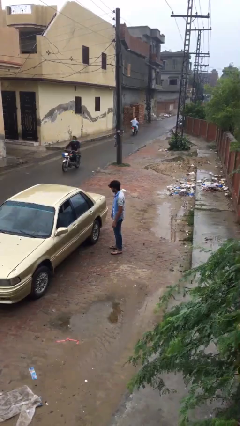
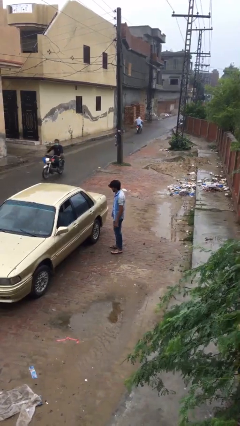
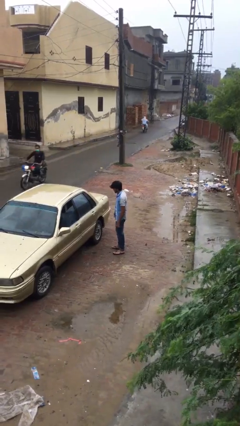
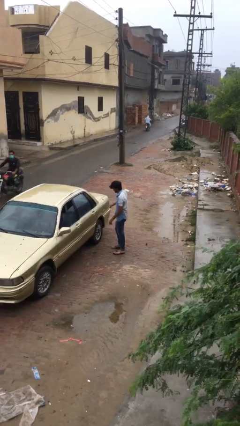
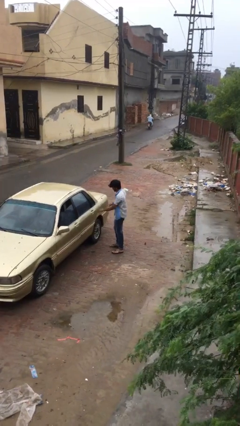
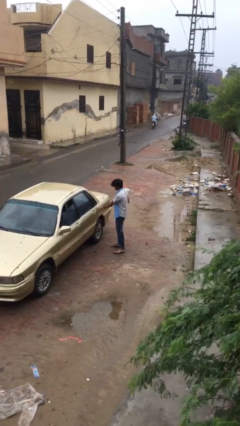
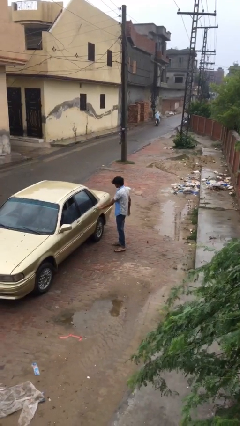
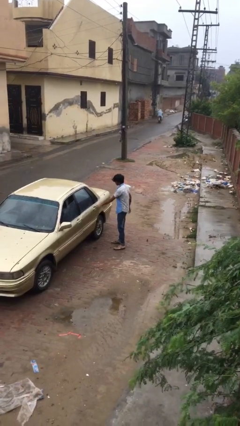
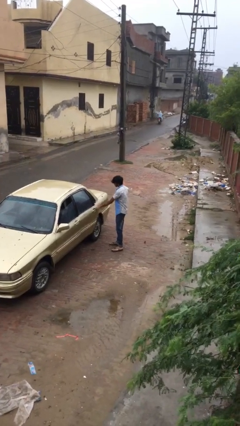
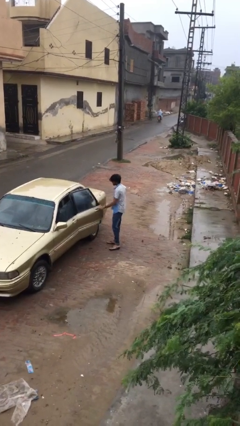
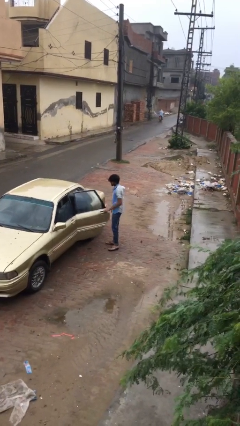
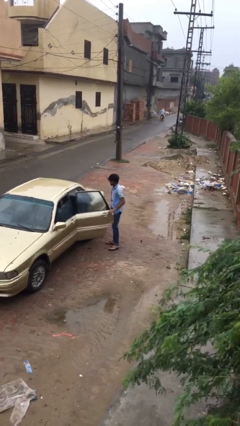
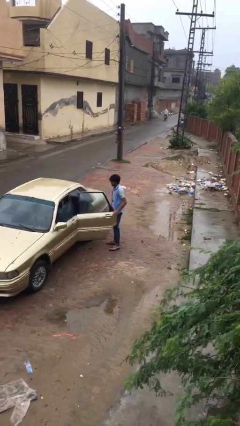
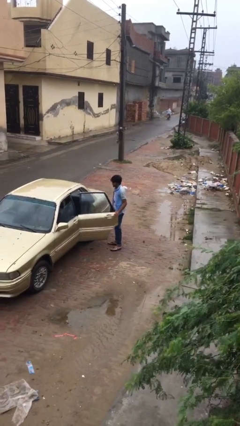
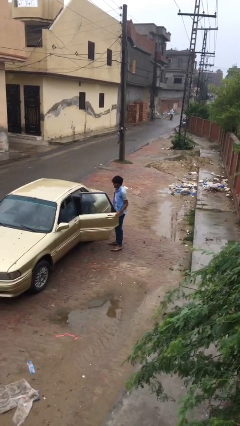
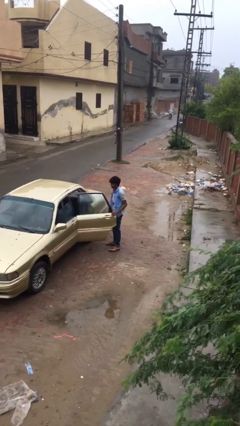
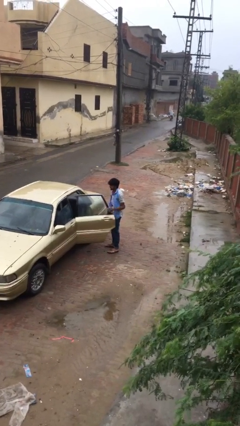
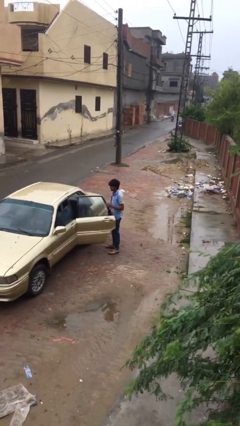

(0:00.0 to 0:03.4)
person opens car door

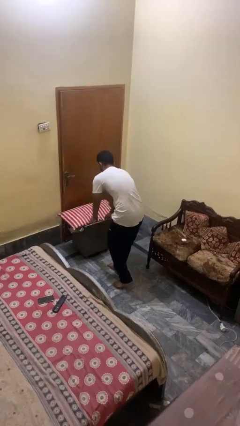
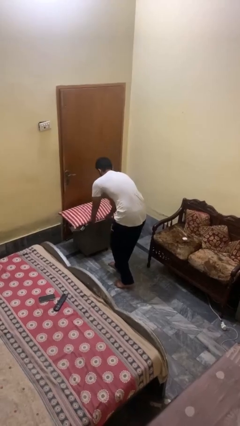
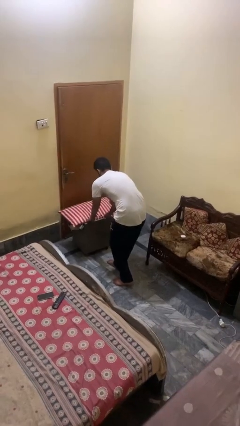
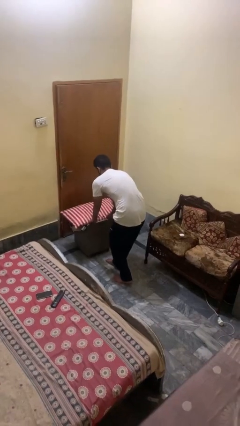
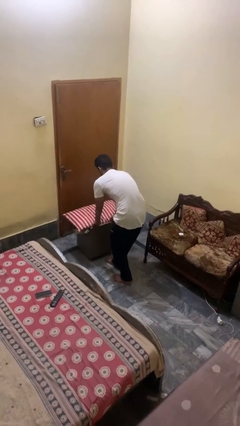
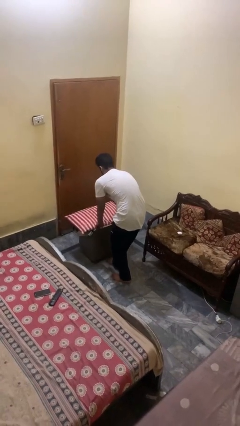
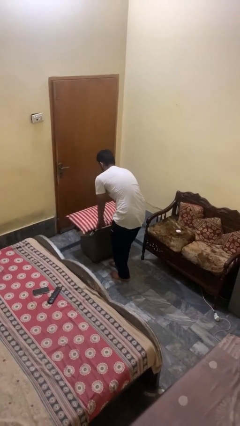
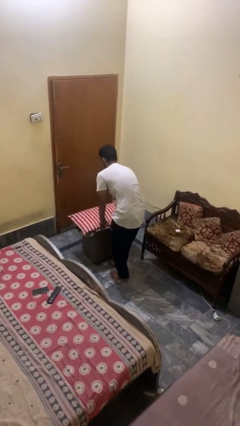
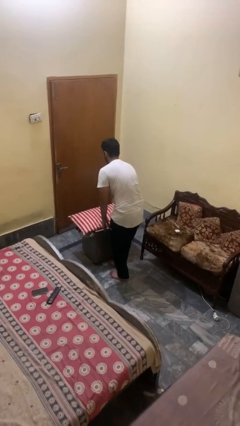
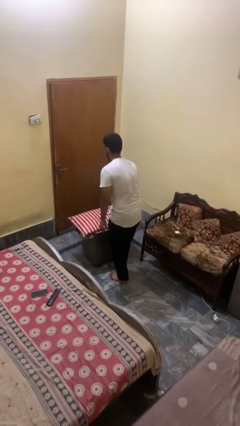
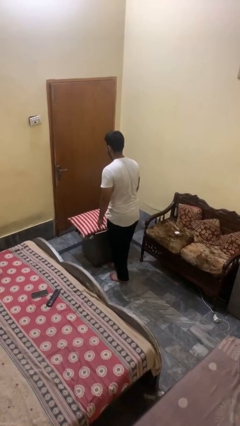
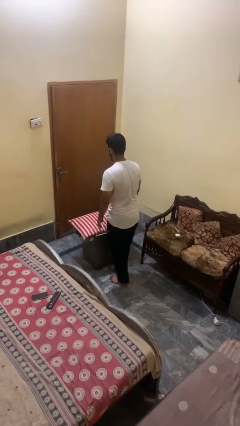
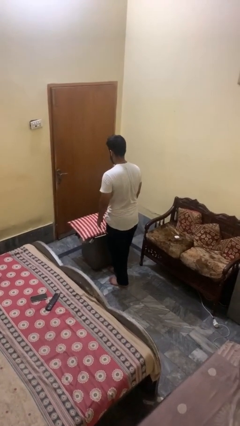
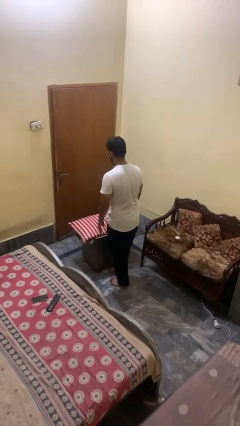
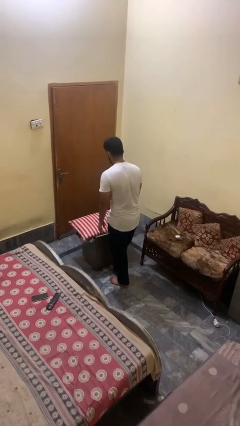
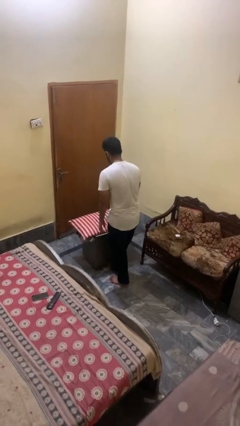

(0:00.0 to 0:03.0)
person pulls wheeled cart

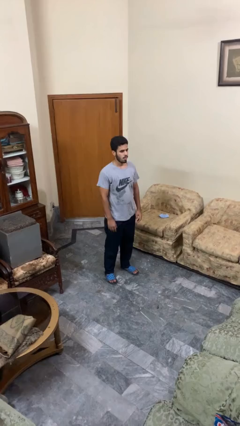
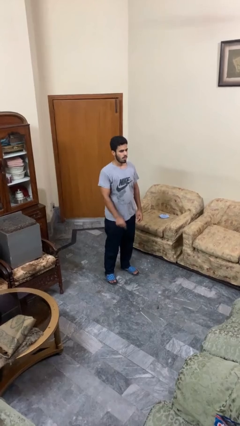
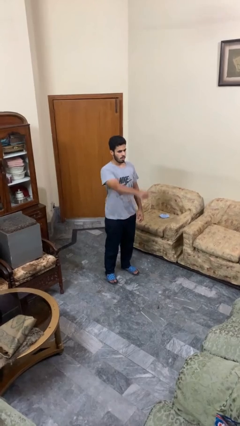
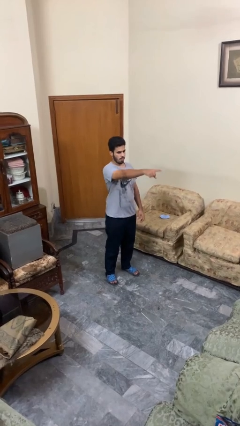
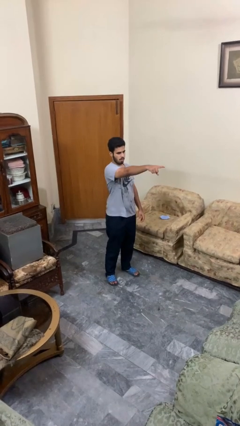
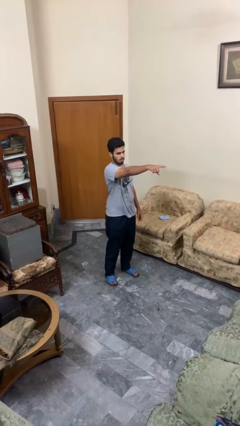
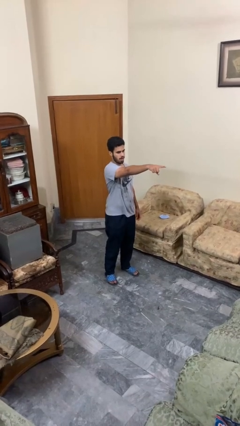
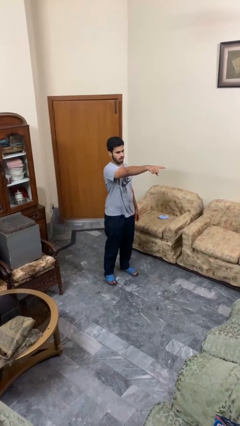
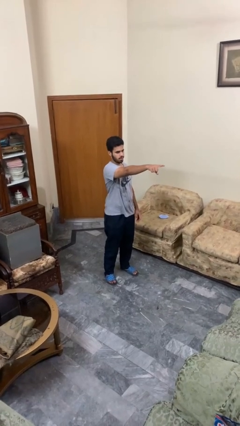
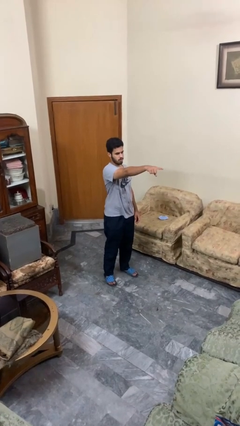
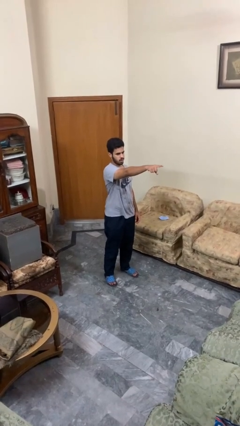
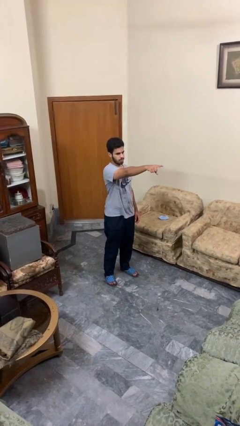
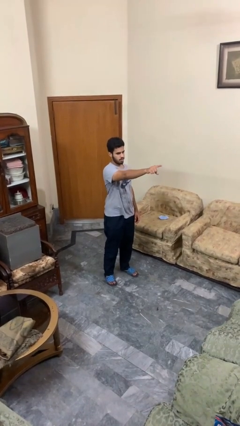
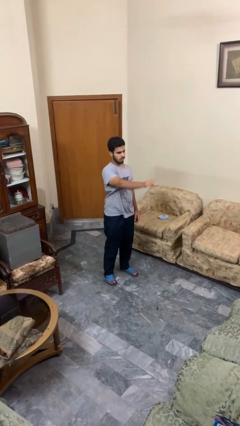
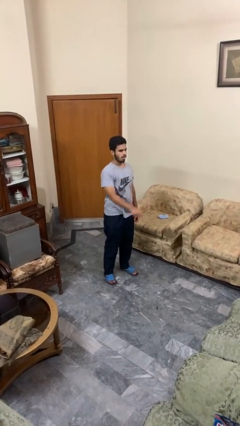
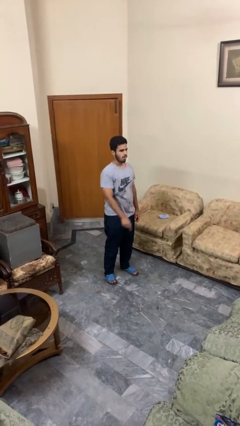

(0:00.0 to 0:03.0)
person points at person

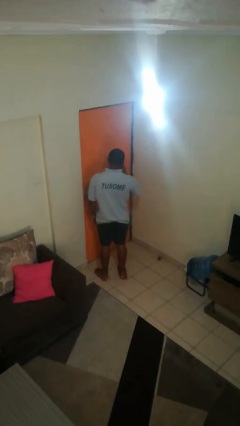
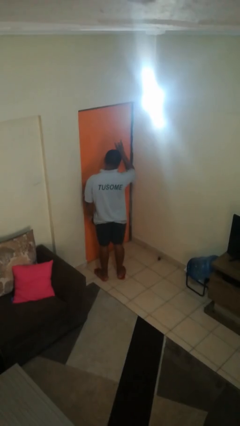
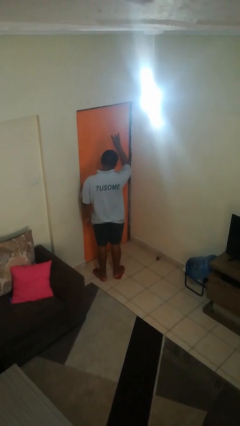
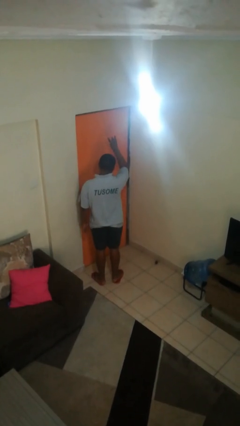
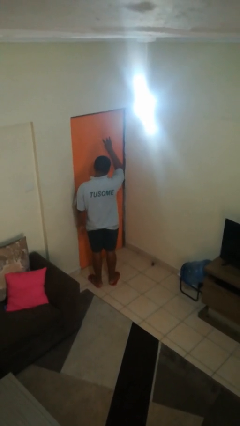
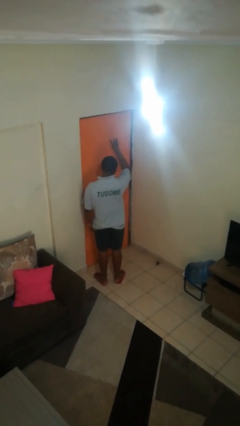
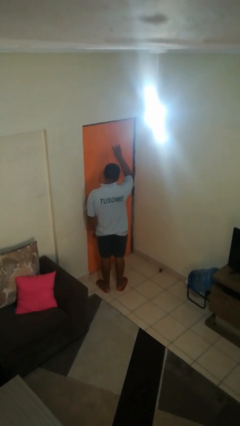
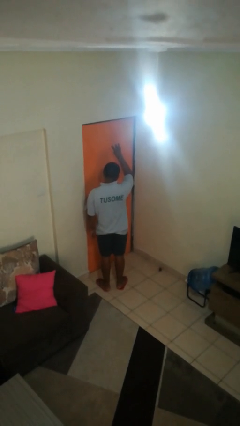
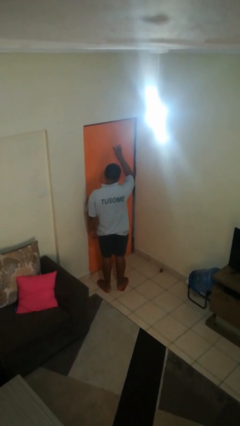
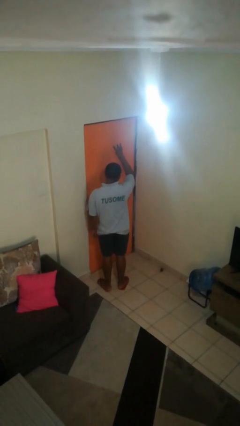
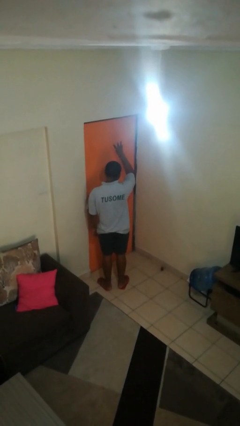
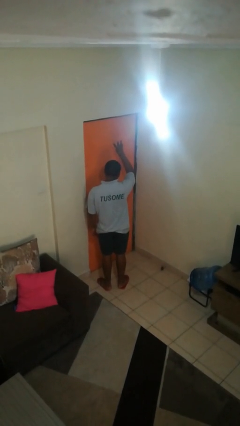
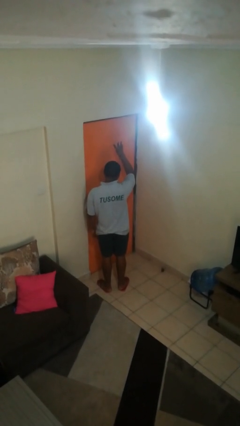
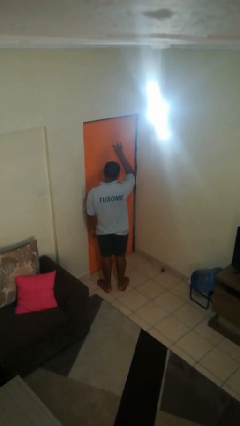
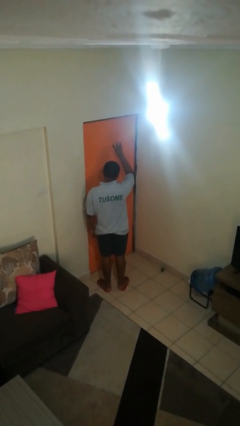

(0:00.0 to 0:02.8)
person gestures number three

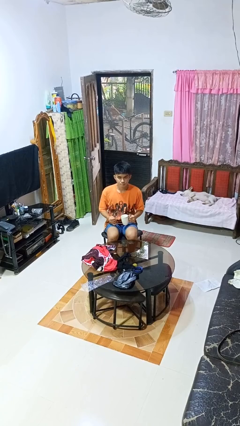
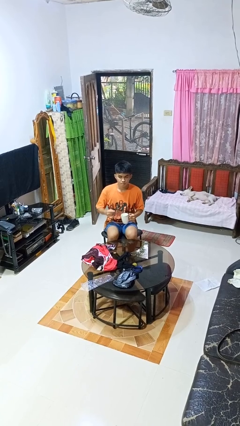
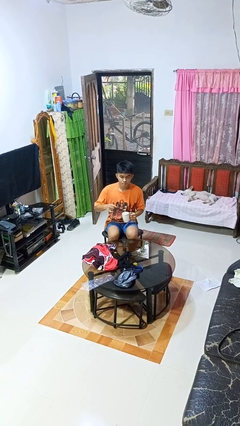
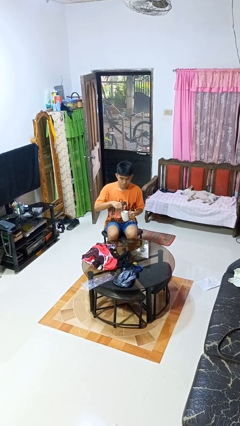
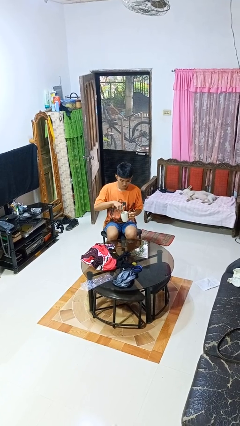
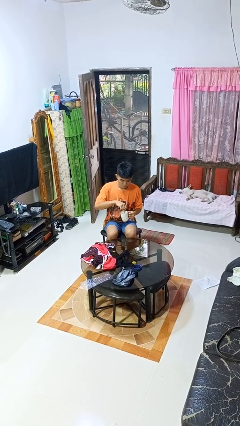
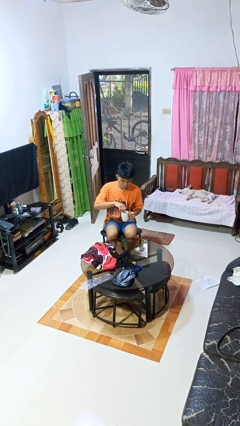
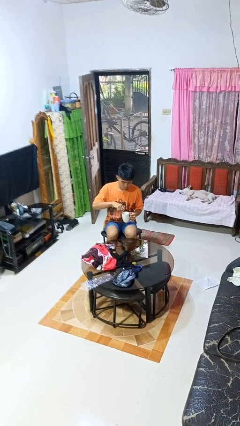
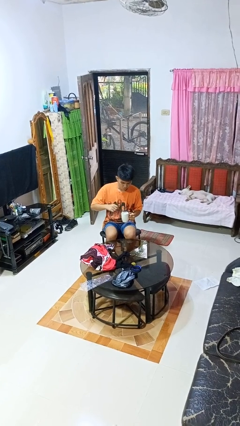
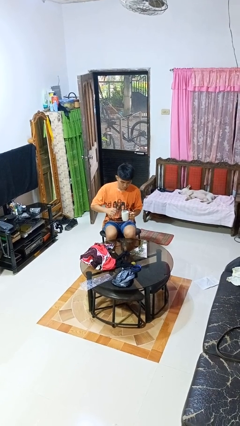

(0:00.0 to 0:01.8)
person stirs mug

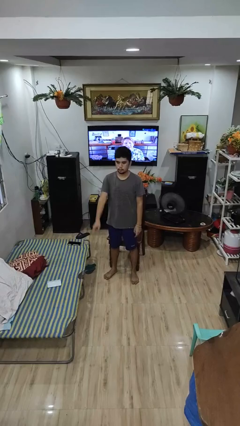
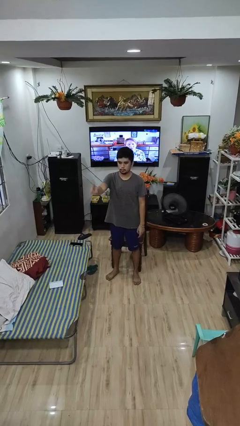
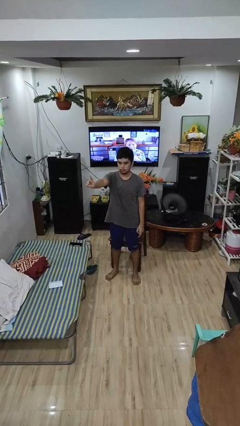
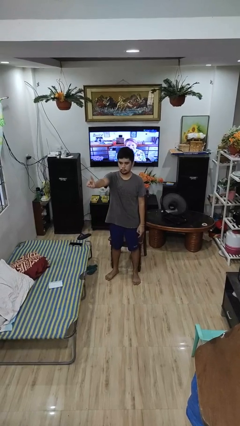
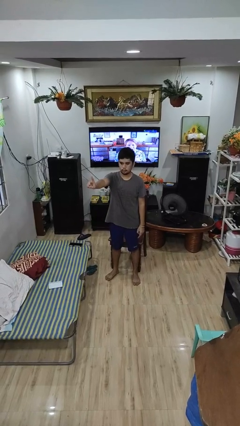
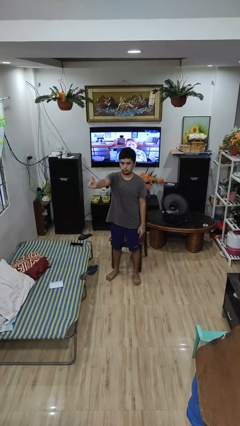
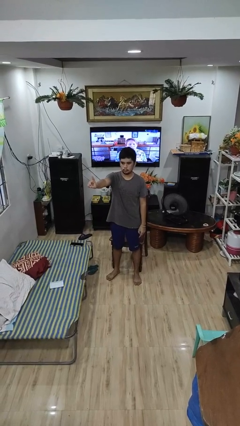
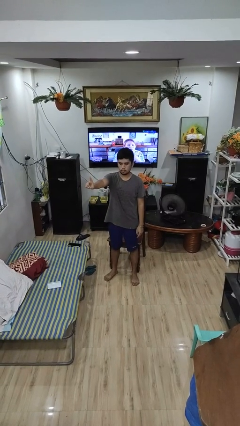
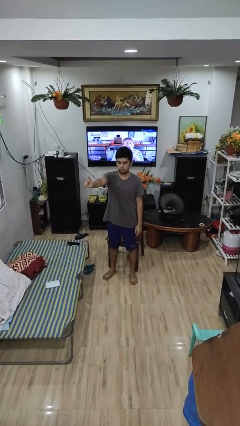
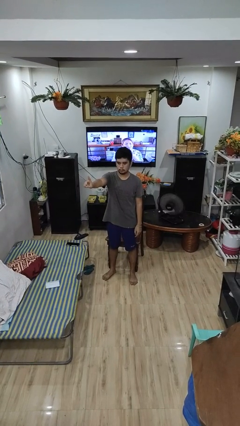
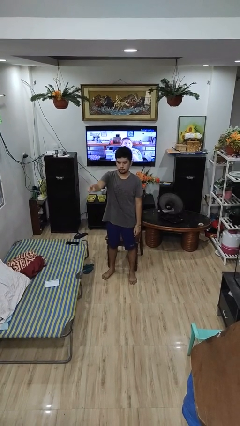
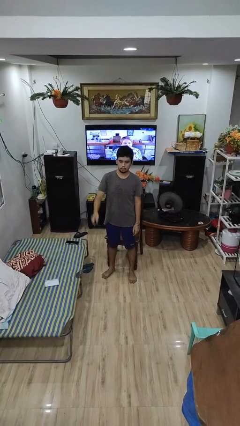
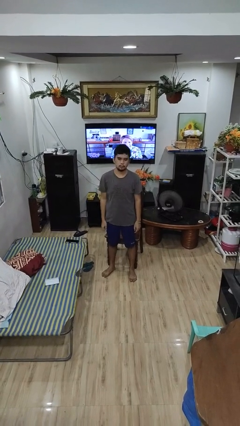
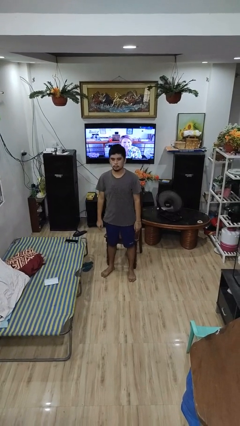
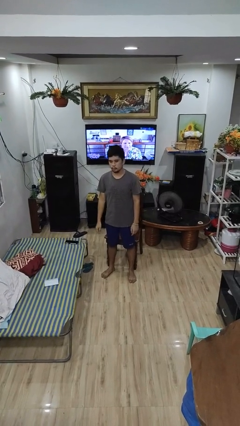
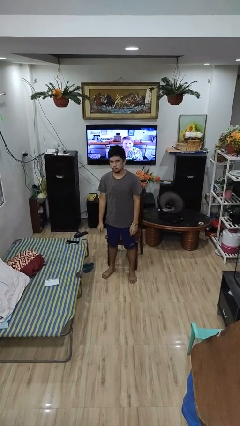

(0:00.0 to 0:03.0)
person gestures number one

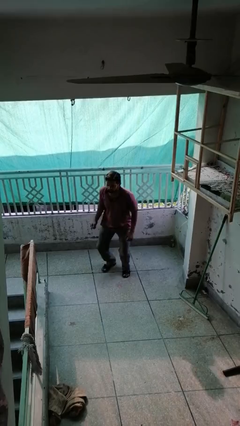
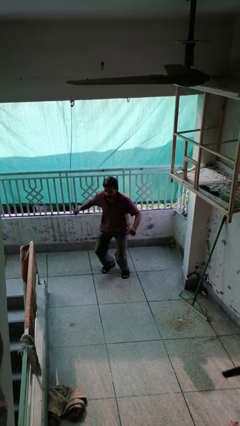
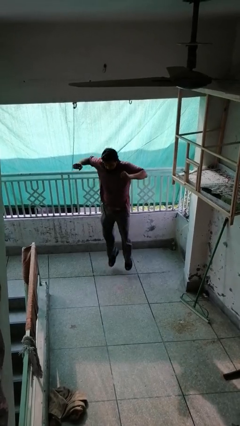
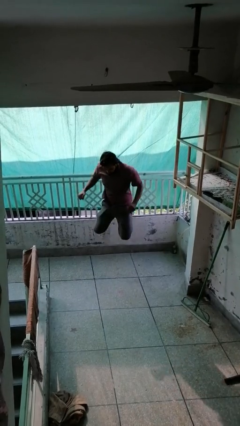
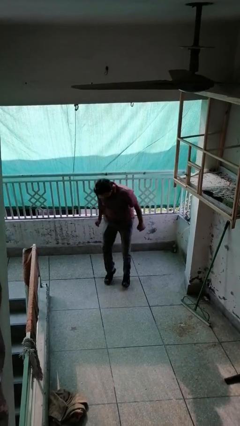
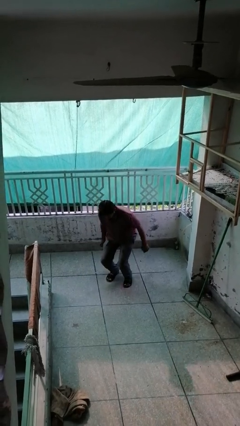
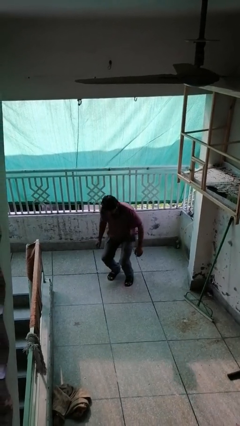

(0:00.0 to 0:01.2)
person jumps
